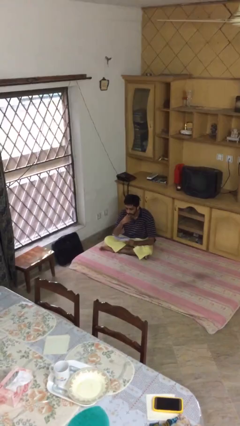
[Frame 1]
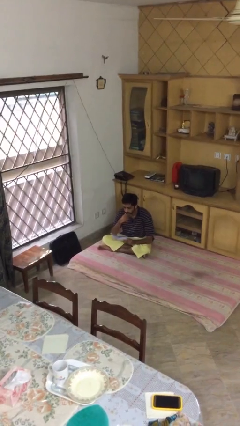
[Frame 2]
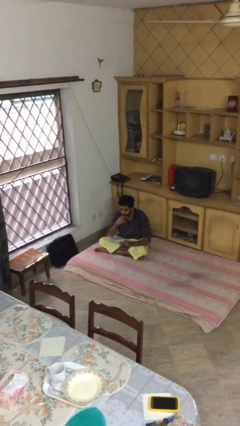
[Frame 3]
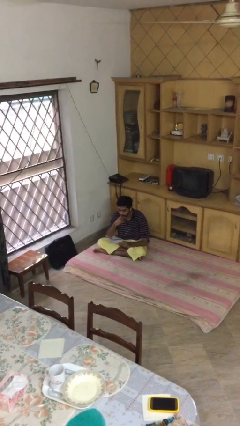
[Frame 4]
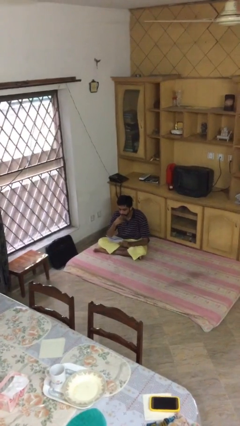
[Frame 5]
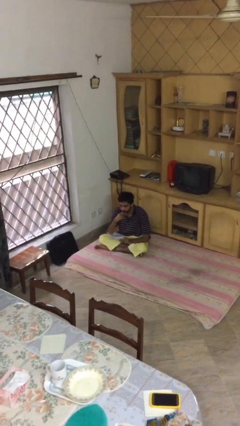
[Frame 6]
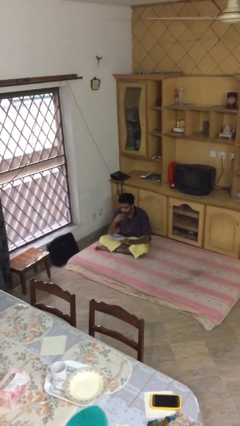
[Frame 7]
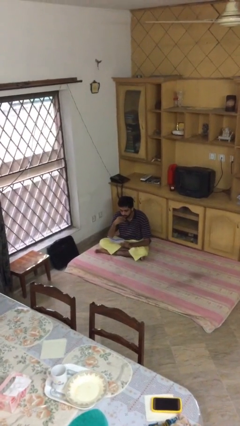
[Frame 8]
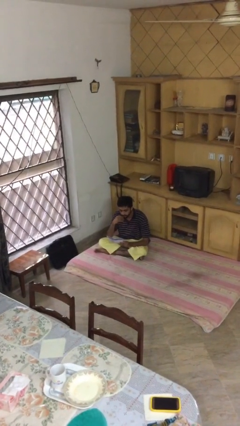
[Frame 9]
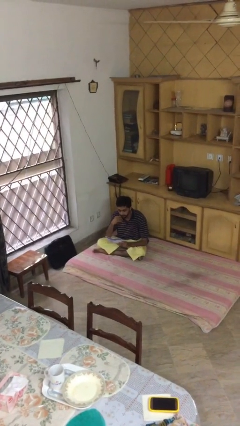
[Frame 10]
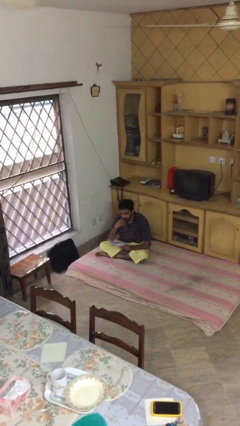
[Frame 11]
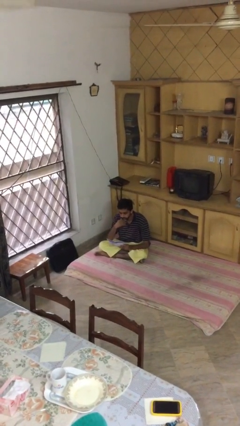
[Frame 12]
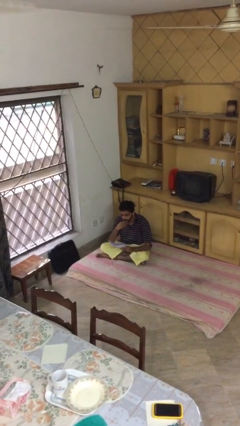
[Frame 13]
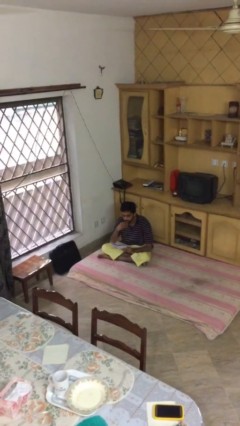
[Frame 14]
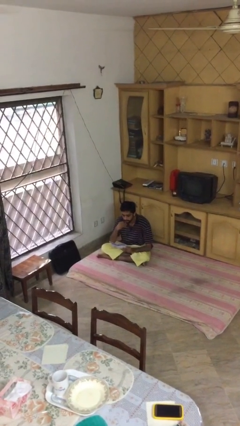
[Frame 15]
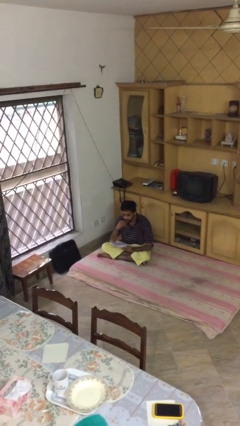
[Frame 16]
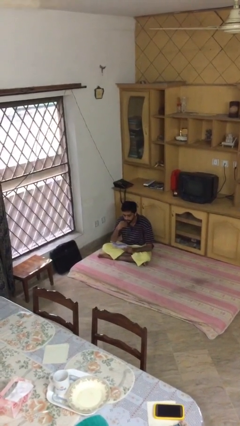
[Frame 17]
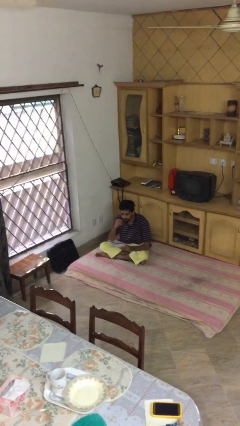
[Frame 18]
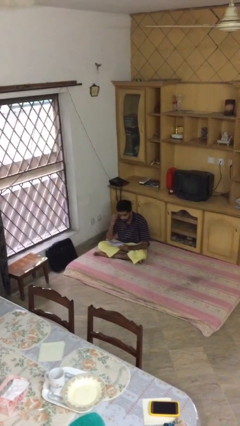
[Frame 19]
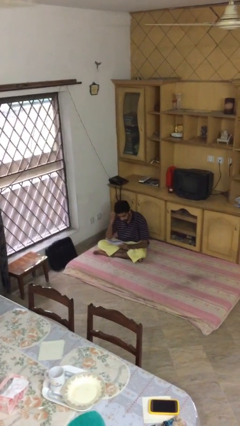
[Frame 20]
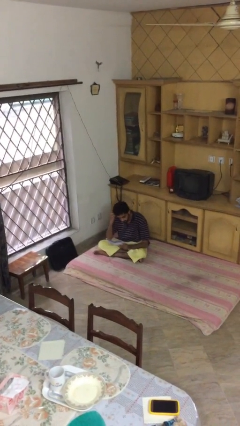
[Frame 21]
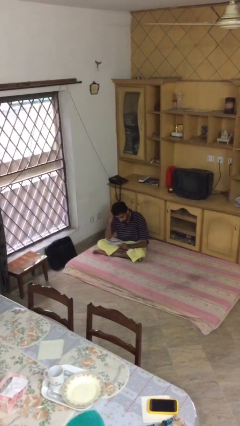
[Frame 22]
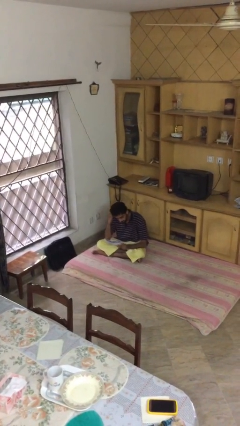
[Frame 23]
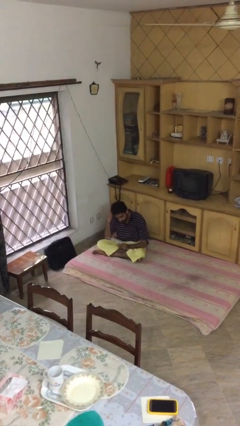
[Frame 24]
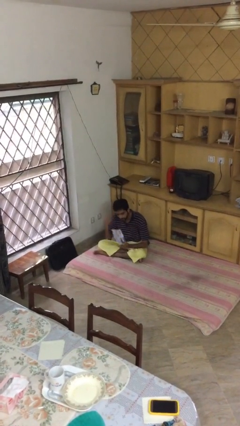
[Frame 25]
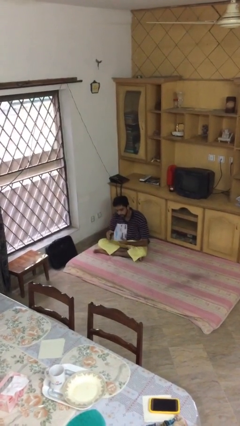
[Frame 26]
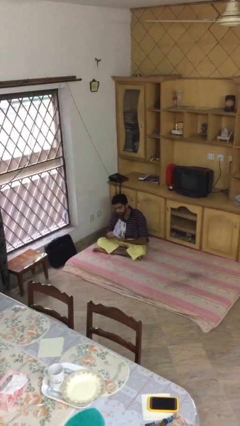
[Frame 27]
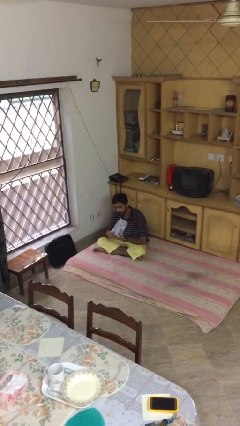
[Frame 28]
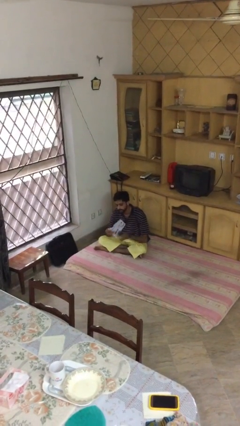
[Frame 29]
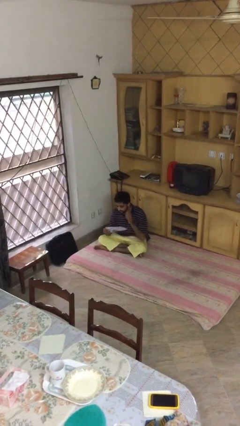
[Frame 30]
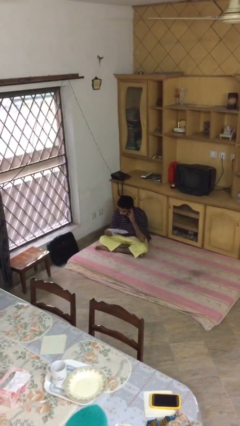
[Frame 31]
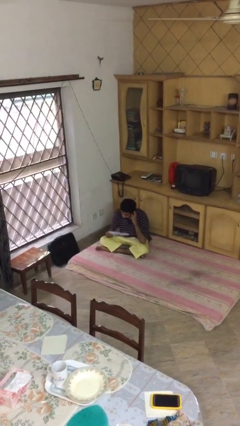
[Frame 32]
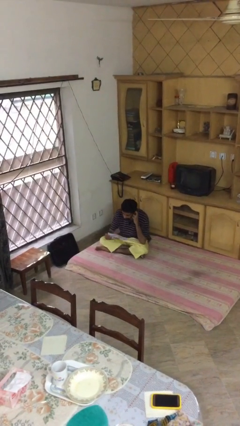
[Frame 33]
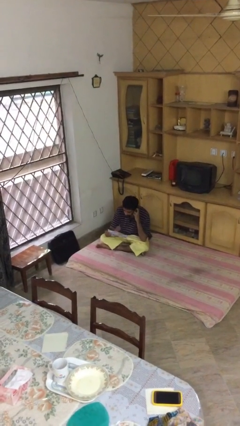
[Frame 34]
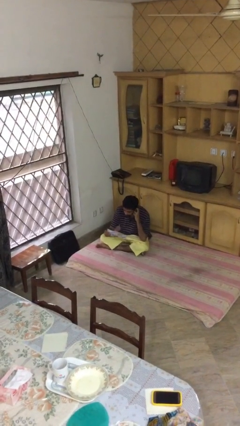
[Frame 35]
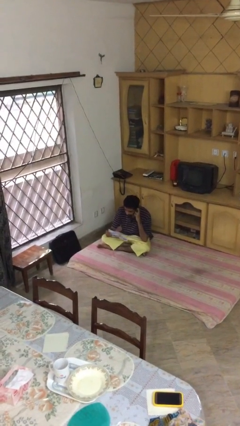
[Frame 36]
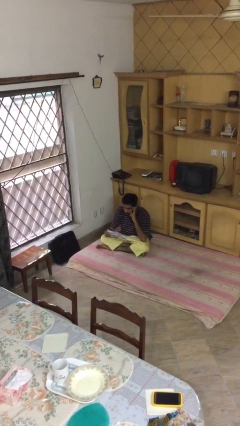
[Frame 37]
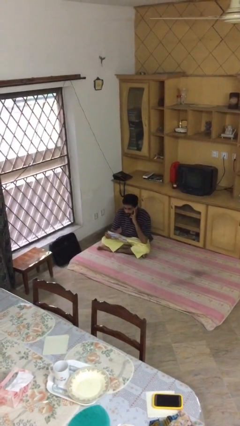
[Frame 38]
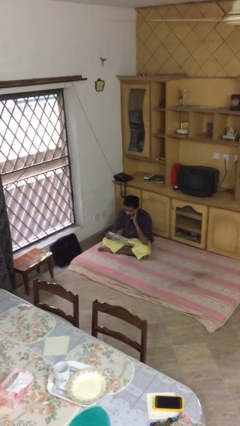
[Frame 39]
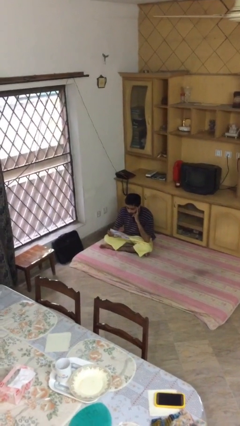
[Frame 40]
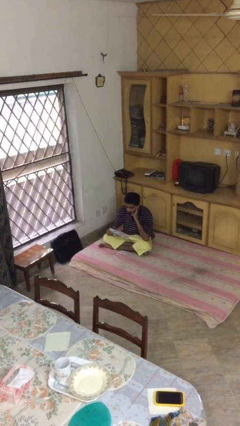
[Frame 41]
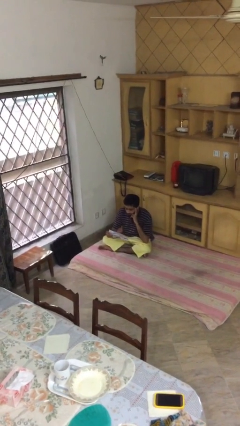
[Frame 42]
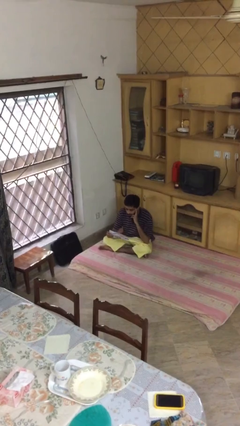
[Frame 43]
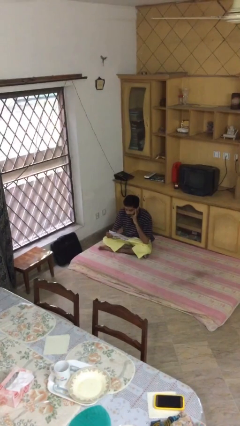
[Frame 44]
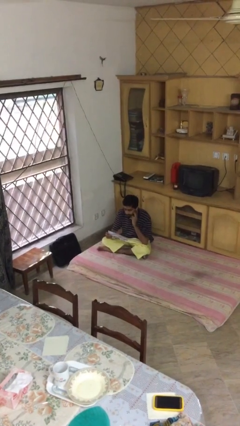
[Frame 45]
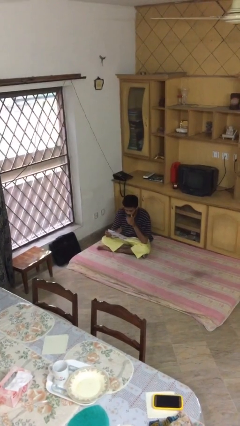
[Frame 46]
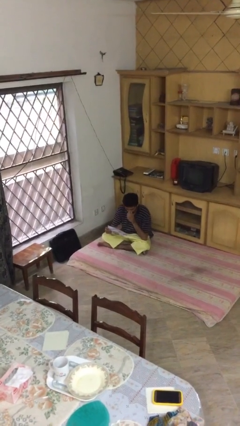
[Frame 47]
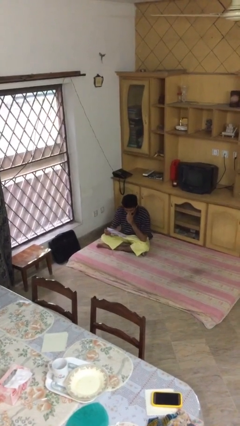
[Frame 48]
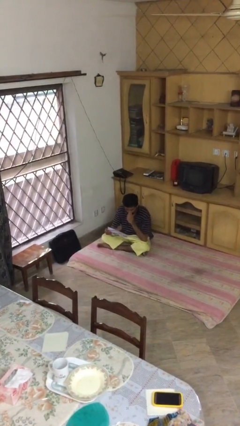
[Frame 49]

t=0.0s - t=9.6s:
person reads document

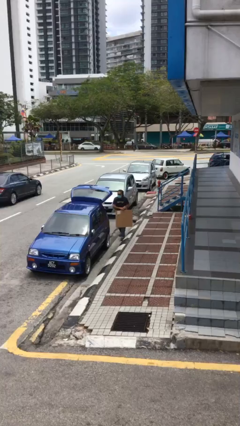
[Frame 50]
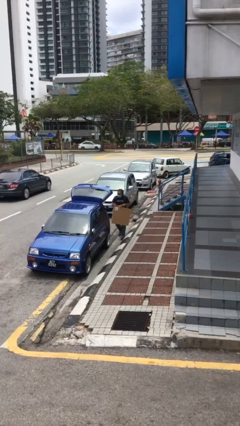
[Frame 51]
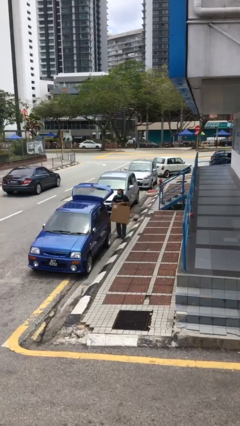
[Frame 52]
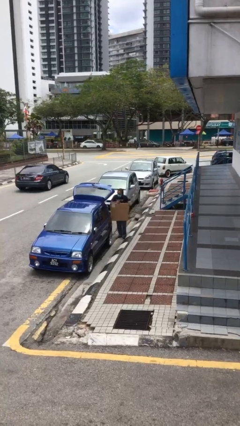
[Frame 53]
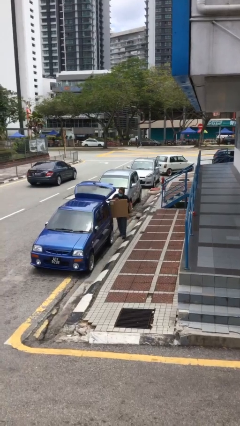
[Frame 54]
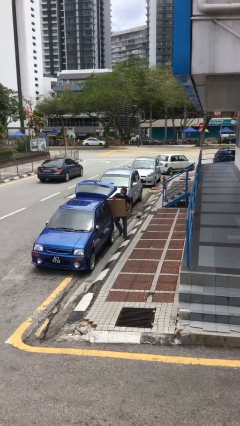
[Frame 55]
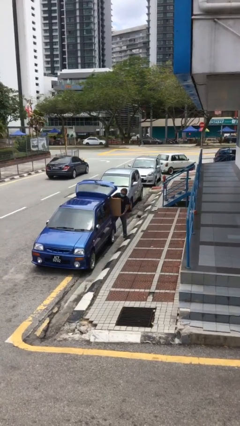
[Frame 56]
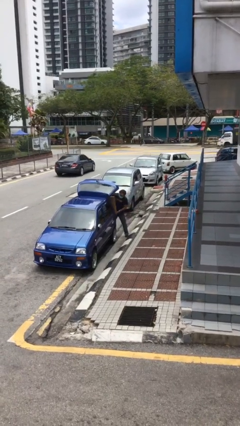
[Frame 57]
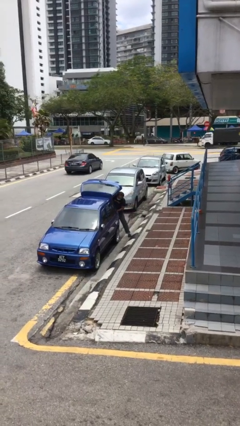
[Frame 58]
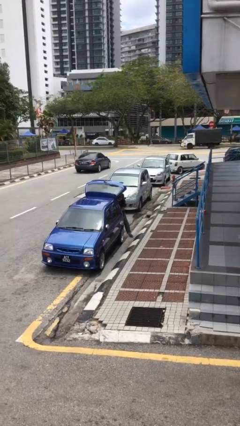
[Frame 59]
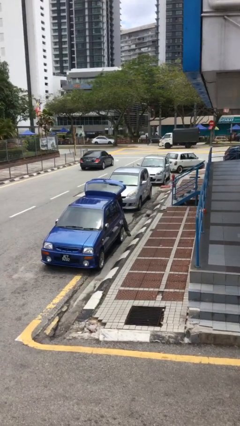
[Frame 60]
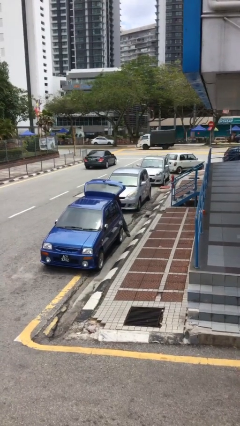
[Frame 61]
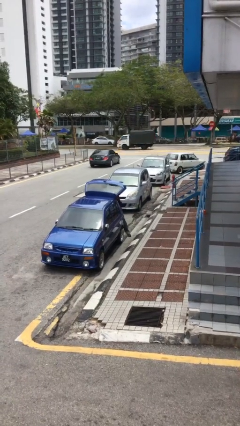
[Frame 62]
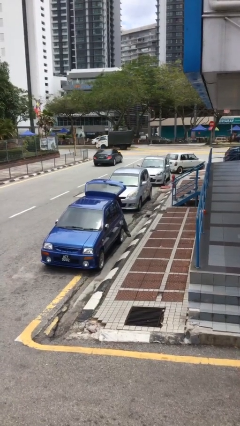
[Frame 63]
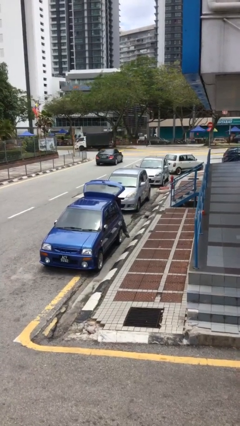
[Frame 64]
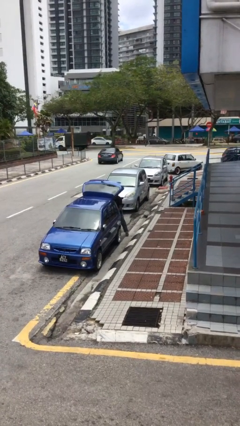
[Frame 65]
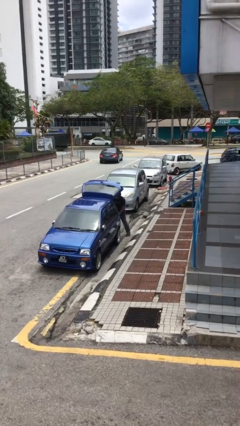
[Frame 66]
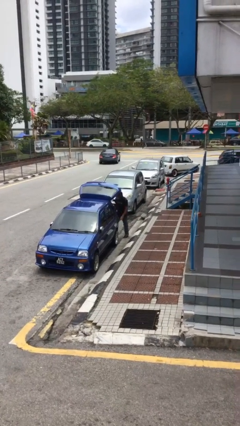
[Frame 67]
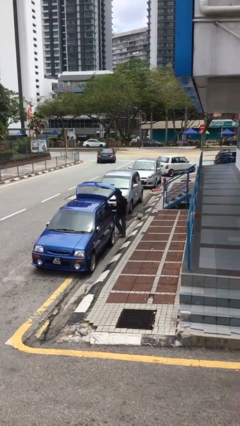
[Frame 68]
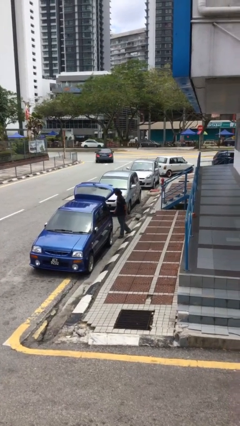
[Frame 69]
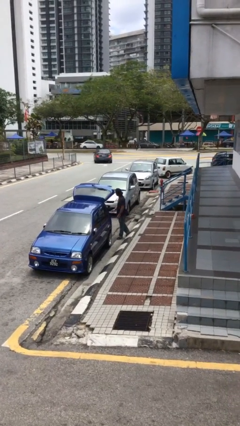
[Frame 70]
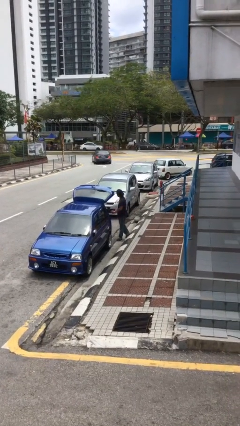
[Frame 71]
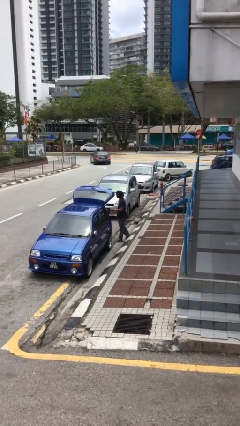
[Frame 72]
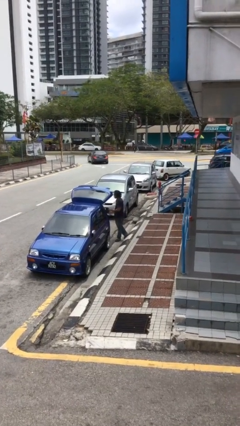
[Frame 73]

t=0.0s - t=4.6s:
person loads car

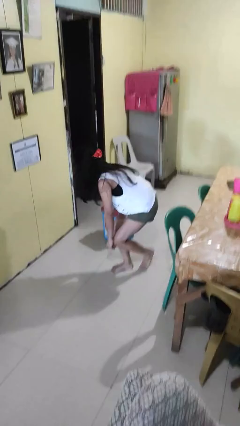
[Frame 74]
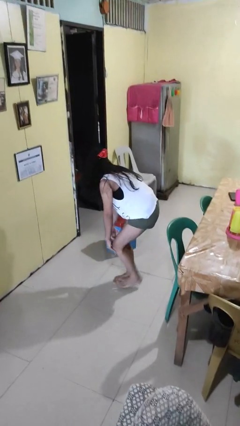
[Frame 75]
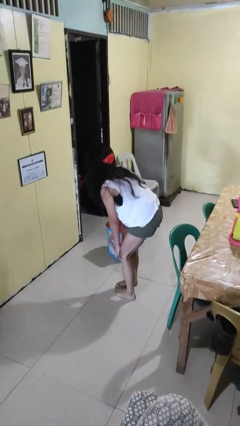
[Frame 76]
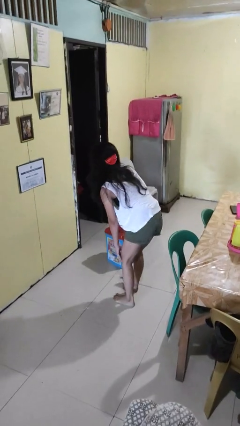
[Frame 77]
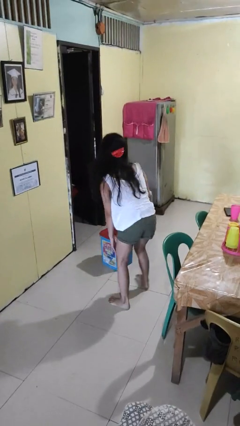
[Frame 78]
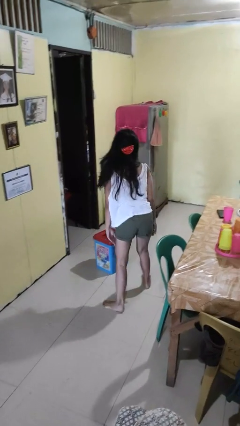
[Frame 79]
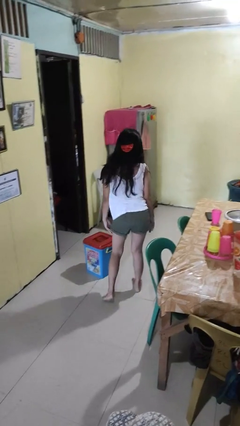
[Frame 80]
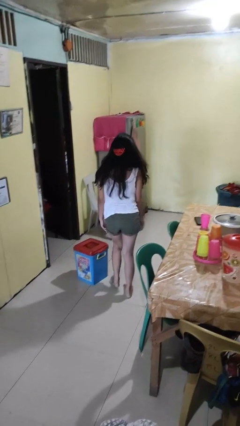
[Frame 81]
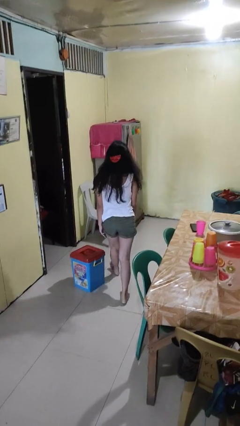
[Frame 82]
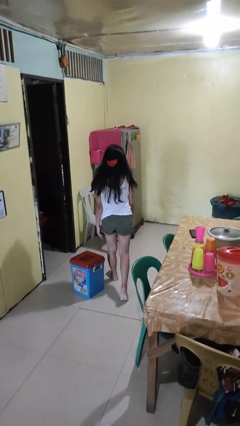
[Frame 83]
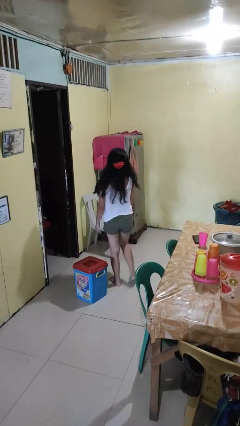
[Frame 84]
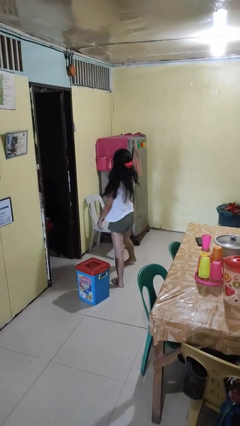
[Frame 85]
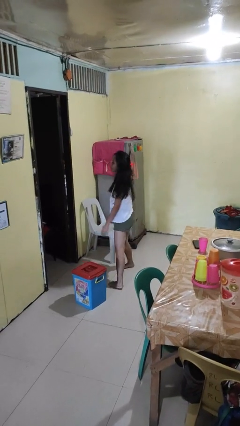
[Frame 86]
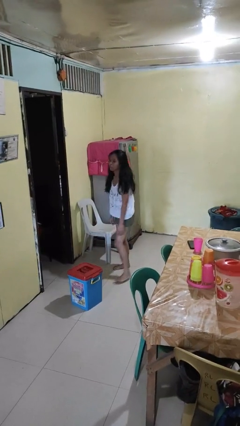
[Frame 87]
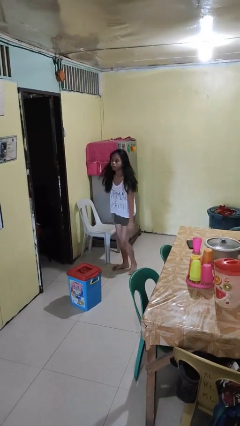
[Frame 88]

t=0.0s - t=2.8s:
person stands up from floor

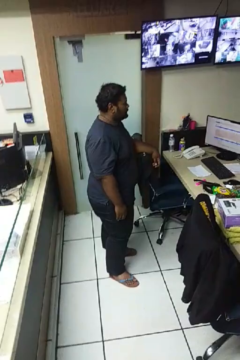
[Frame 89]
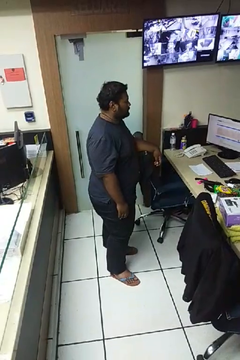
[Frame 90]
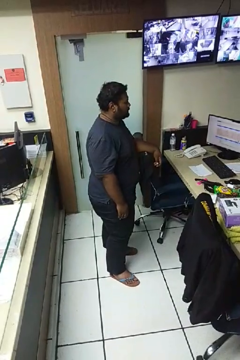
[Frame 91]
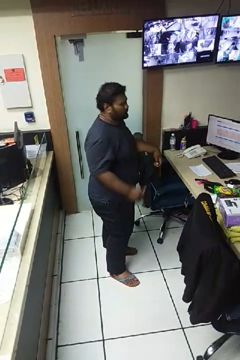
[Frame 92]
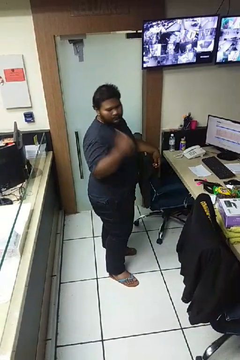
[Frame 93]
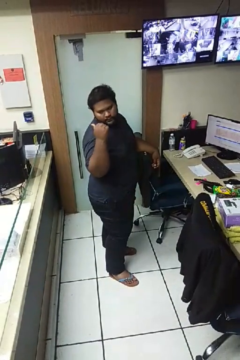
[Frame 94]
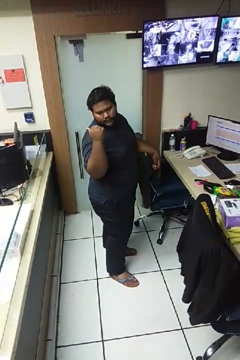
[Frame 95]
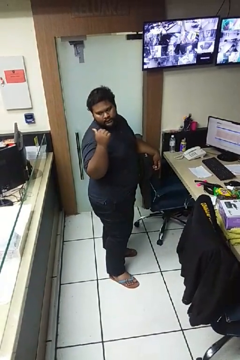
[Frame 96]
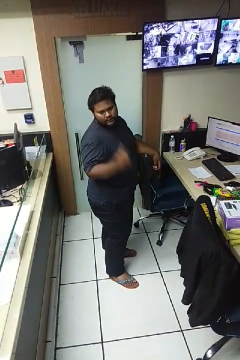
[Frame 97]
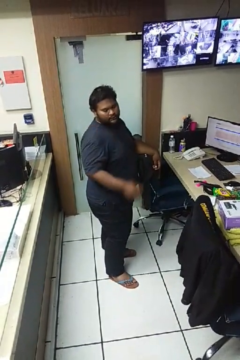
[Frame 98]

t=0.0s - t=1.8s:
person gestures behind me
